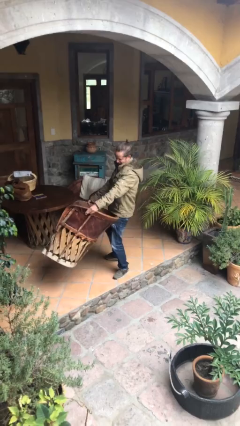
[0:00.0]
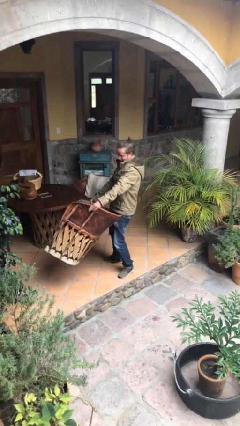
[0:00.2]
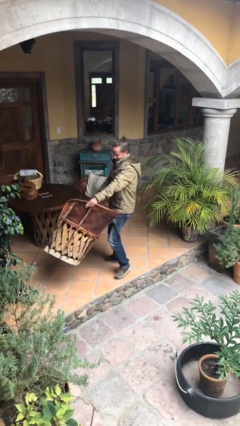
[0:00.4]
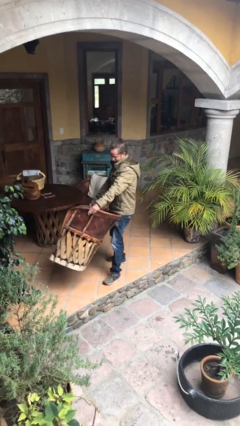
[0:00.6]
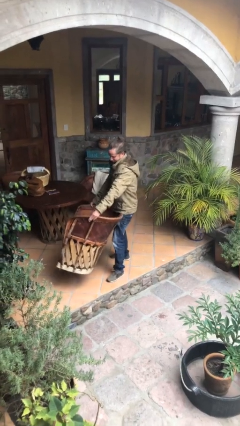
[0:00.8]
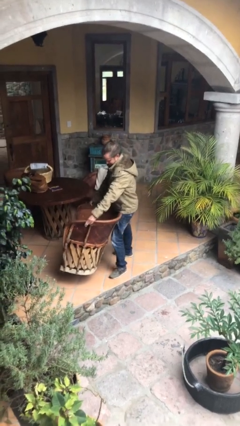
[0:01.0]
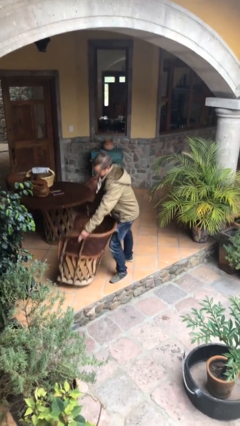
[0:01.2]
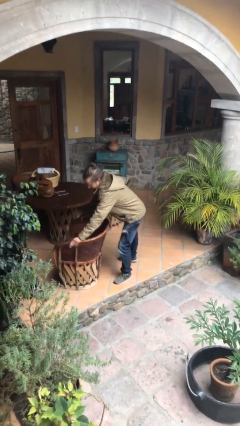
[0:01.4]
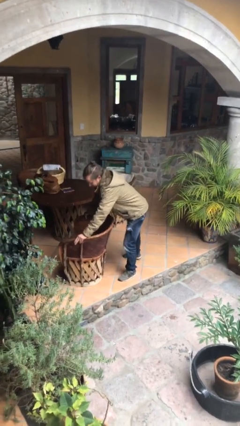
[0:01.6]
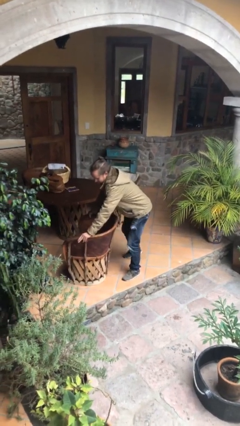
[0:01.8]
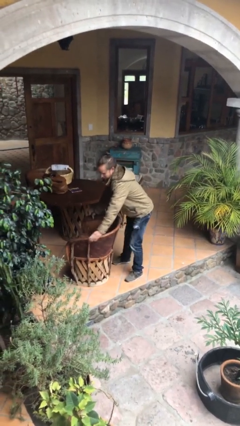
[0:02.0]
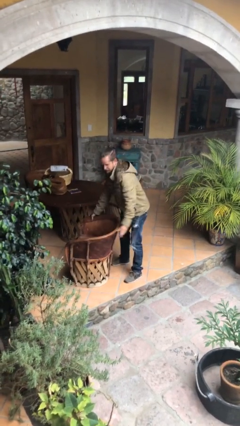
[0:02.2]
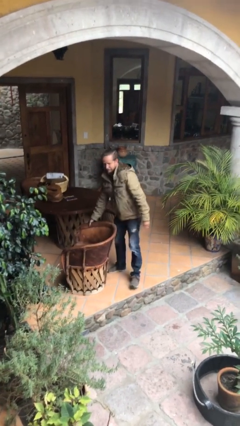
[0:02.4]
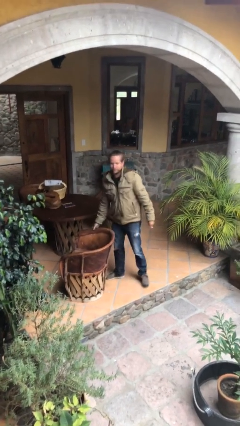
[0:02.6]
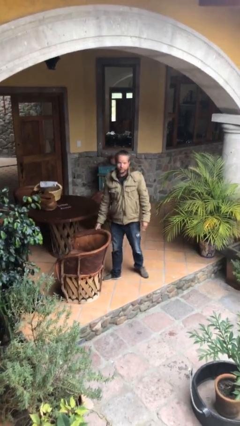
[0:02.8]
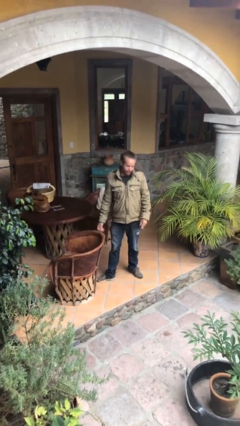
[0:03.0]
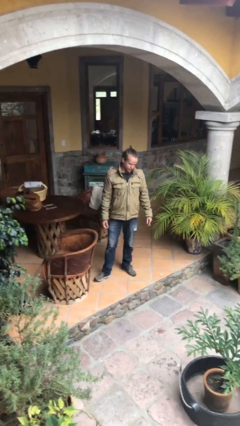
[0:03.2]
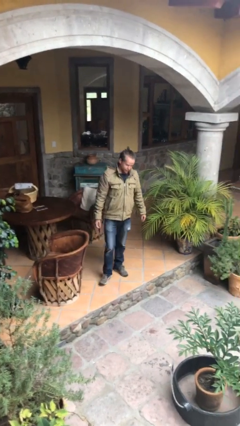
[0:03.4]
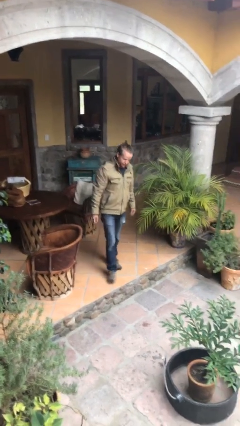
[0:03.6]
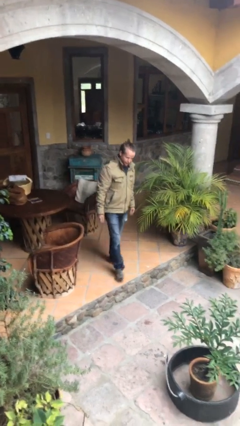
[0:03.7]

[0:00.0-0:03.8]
person puts down object on floor

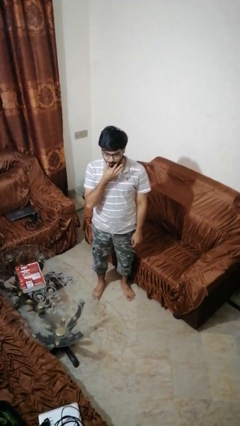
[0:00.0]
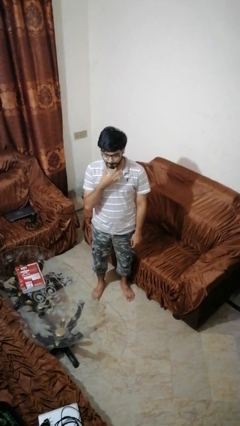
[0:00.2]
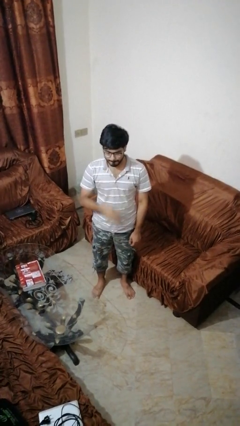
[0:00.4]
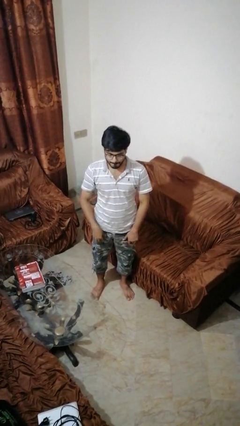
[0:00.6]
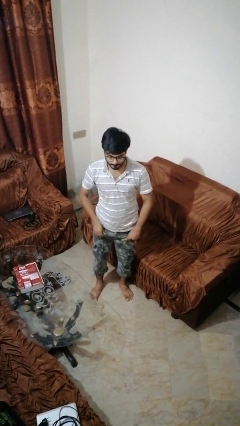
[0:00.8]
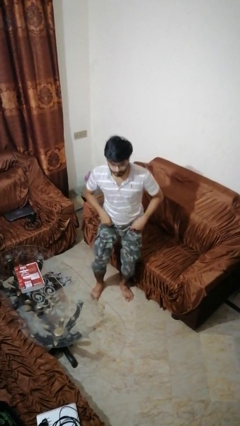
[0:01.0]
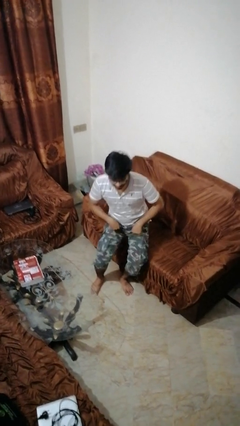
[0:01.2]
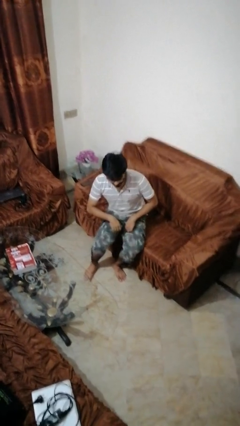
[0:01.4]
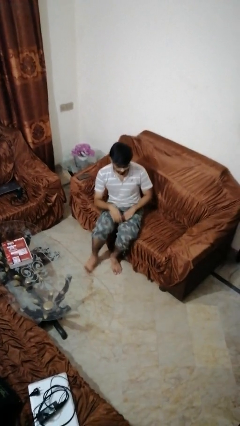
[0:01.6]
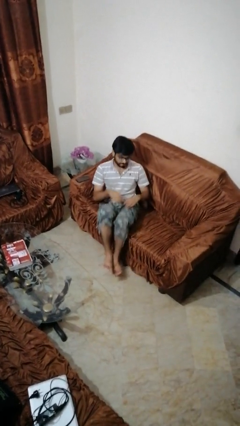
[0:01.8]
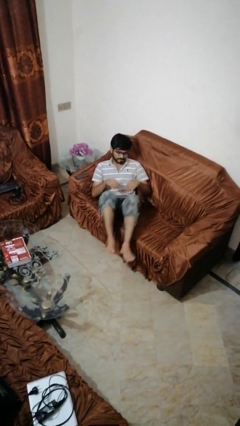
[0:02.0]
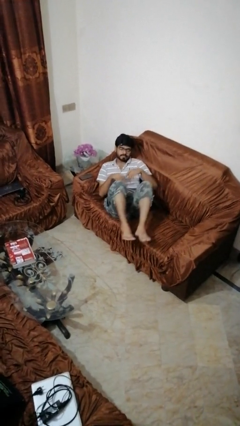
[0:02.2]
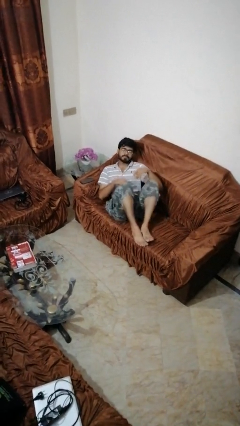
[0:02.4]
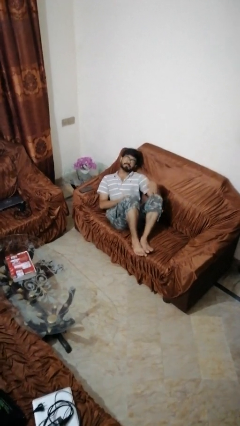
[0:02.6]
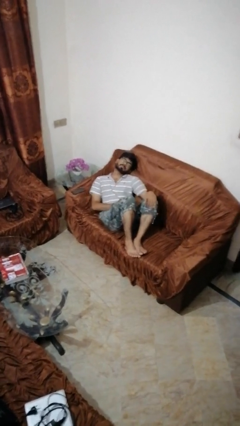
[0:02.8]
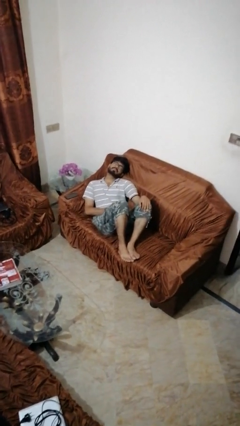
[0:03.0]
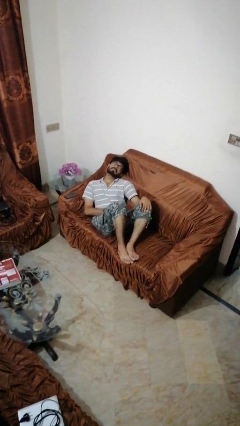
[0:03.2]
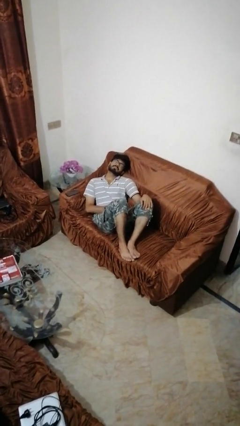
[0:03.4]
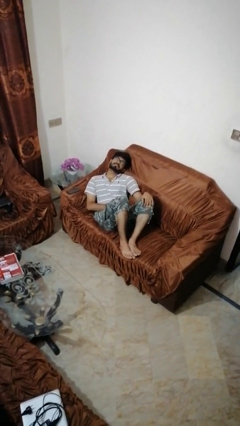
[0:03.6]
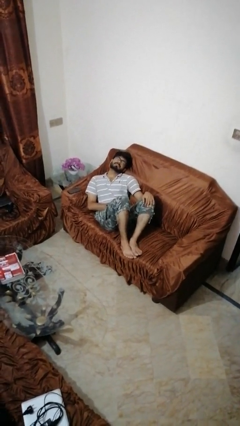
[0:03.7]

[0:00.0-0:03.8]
person lies down on couch

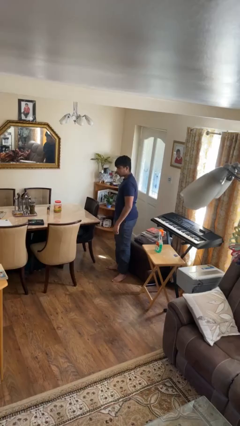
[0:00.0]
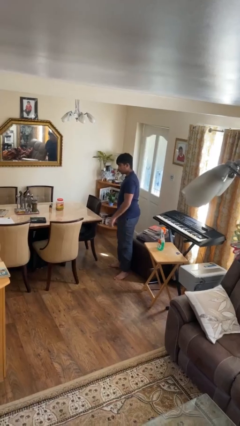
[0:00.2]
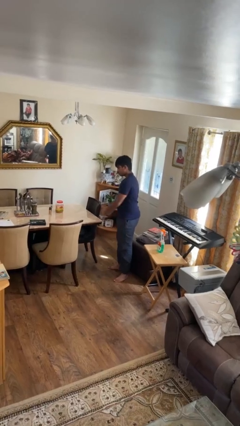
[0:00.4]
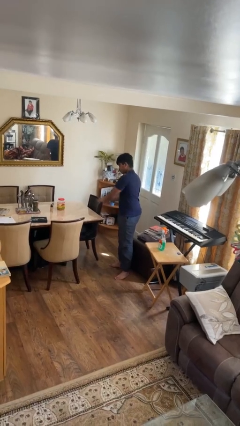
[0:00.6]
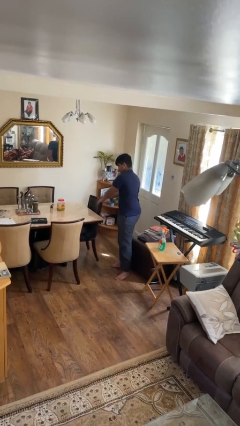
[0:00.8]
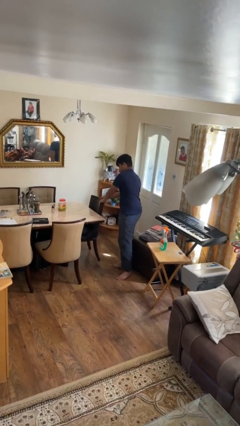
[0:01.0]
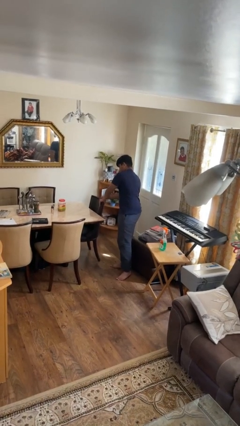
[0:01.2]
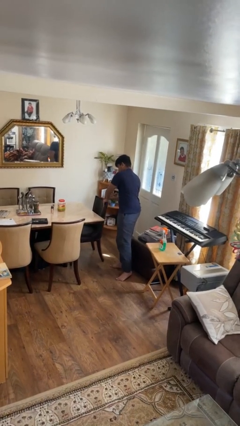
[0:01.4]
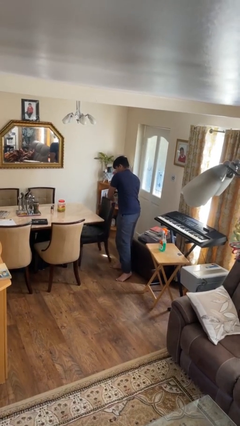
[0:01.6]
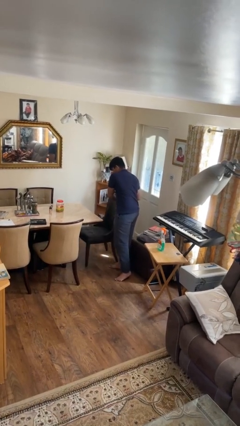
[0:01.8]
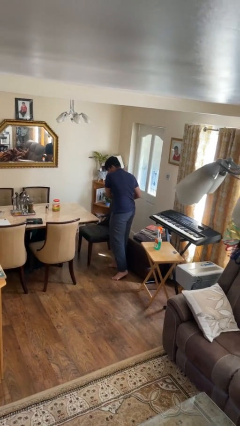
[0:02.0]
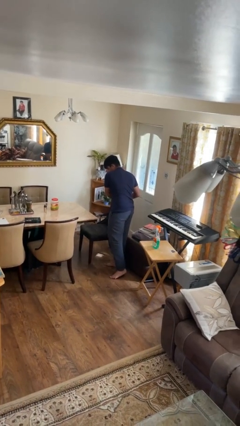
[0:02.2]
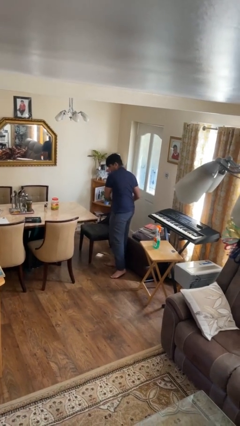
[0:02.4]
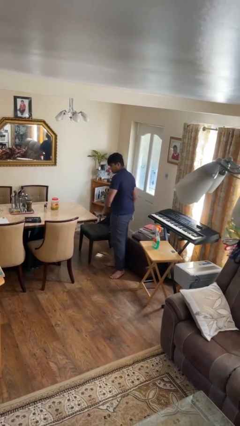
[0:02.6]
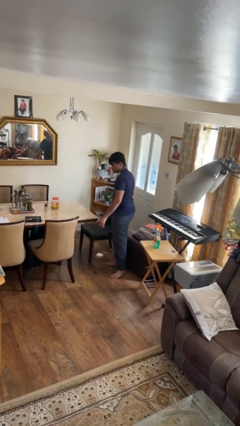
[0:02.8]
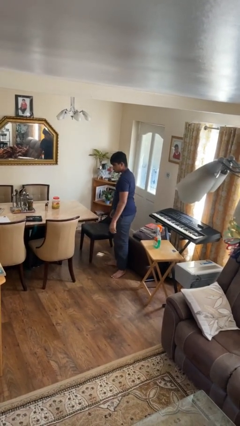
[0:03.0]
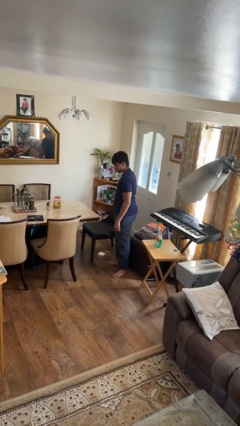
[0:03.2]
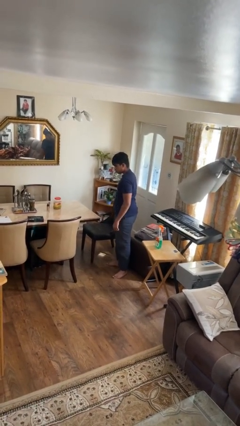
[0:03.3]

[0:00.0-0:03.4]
person pulls out chair

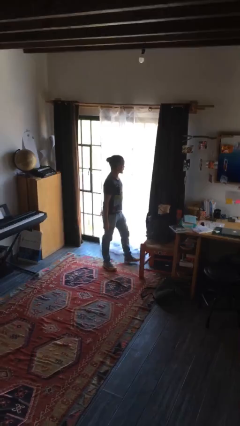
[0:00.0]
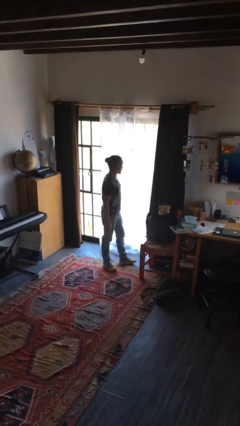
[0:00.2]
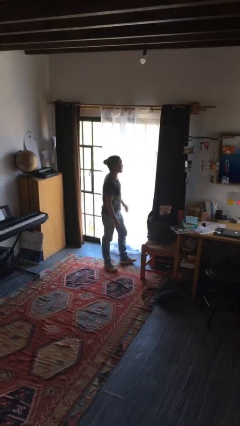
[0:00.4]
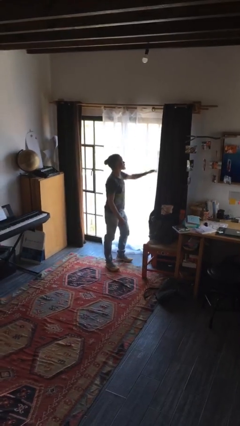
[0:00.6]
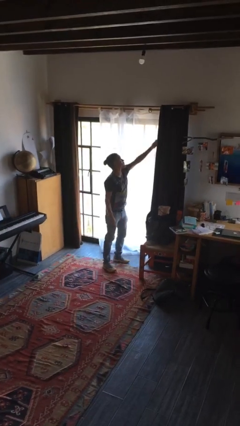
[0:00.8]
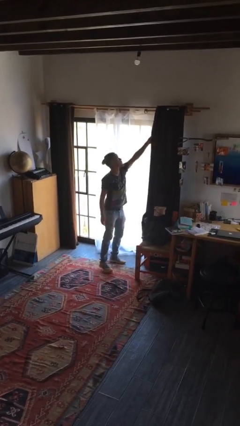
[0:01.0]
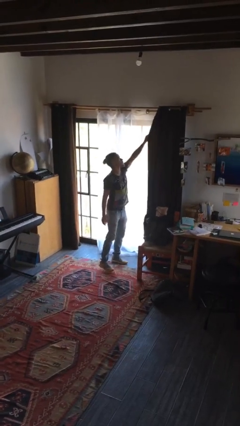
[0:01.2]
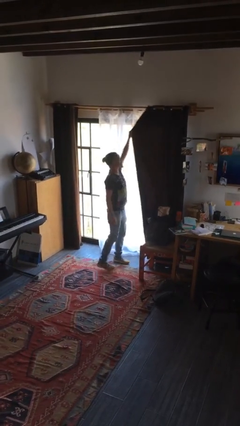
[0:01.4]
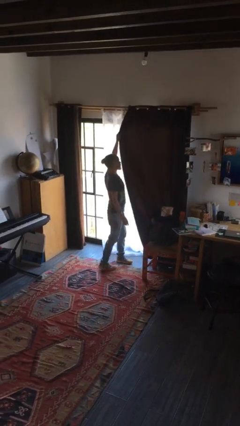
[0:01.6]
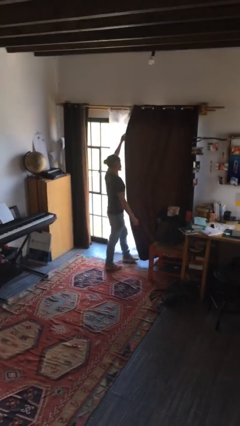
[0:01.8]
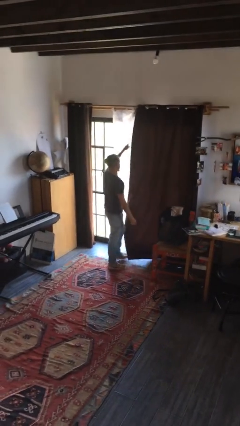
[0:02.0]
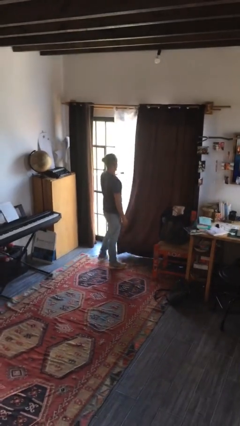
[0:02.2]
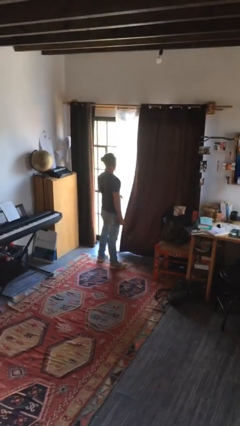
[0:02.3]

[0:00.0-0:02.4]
person closes curtains

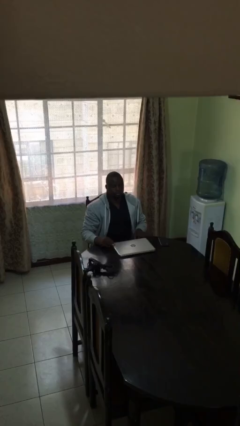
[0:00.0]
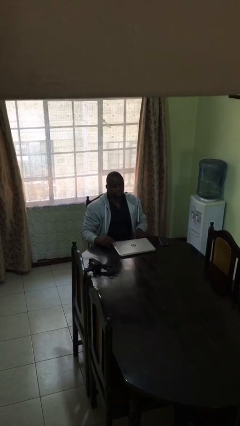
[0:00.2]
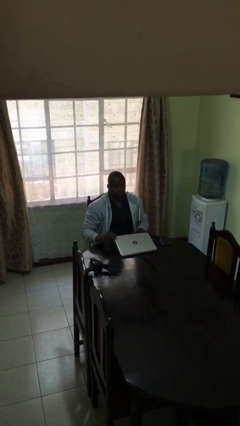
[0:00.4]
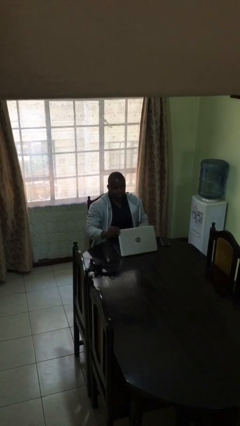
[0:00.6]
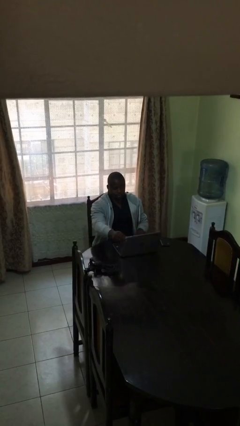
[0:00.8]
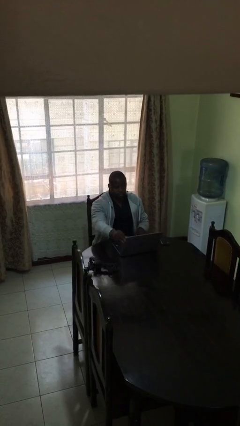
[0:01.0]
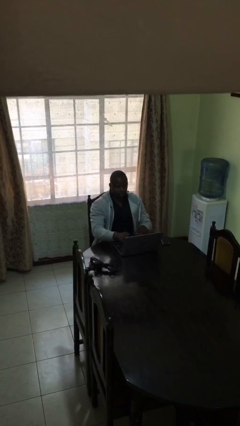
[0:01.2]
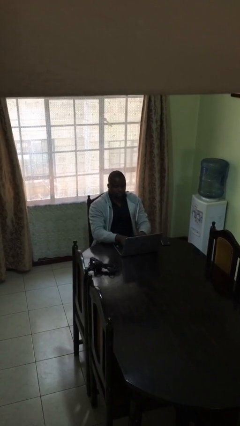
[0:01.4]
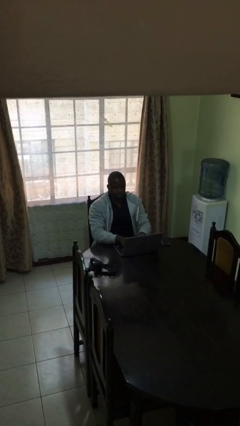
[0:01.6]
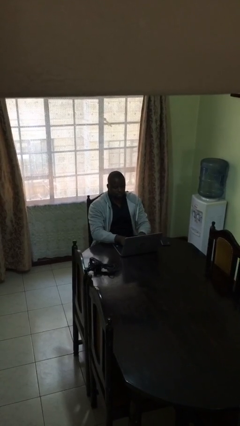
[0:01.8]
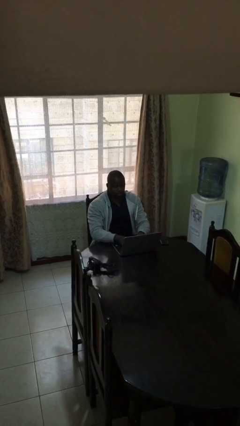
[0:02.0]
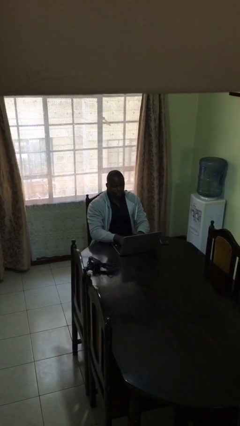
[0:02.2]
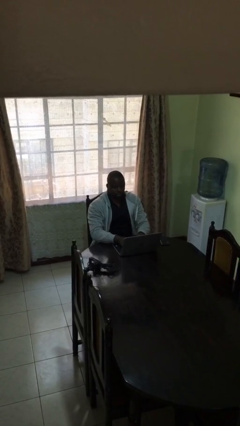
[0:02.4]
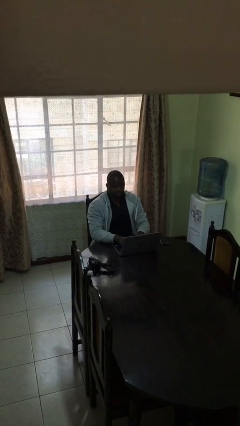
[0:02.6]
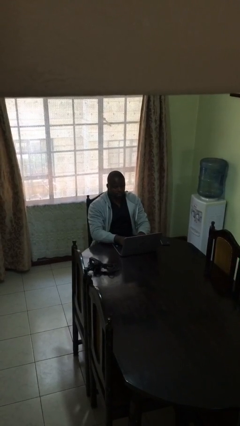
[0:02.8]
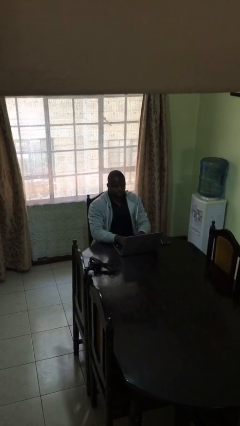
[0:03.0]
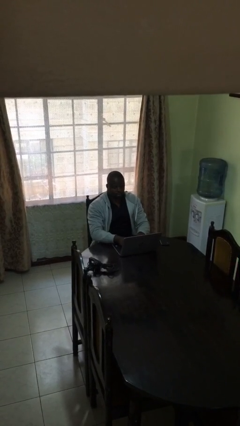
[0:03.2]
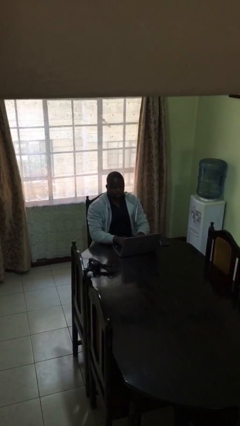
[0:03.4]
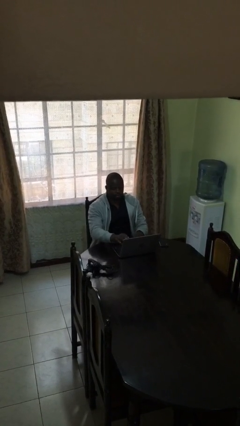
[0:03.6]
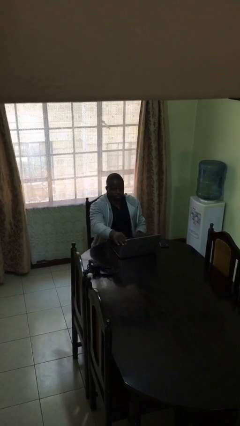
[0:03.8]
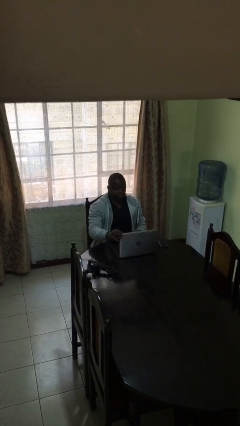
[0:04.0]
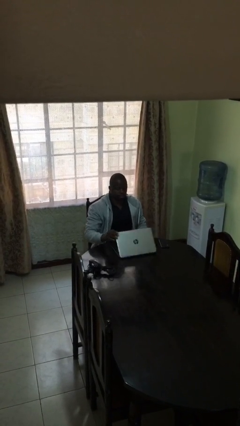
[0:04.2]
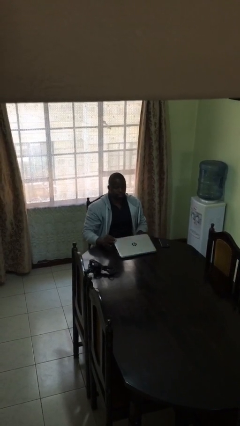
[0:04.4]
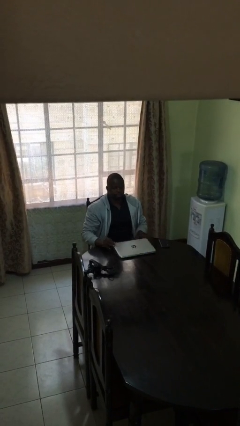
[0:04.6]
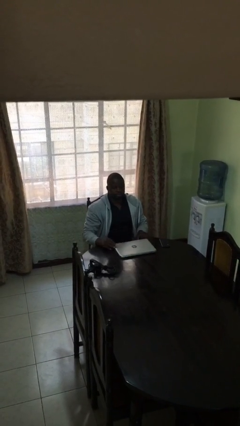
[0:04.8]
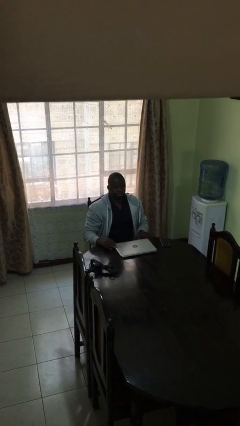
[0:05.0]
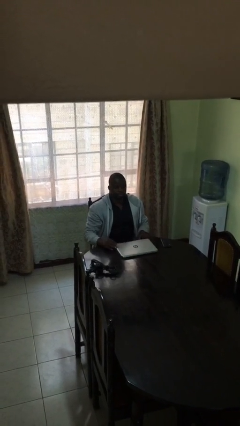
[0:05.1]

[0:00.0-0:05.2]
person interacts with laptop
